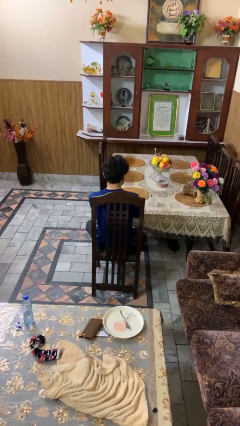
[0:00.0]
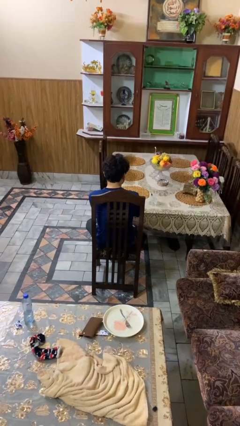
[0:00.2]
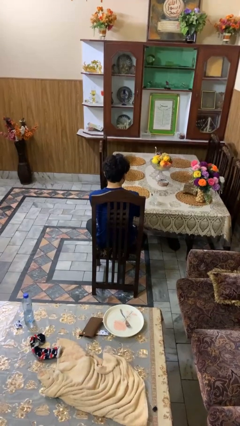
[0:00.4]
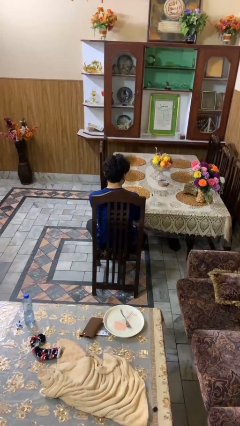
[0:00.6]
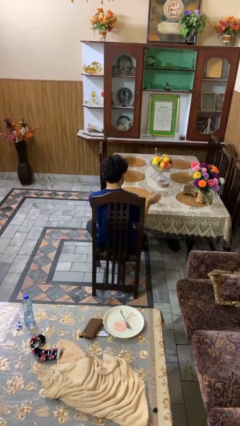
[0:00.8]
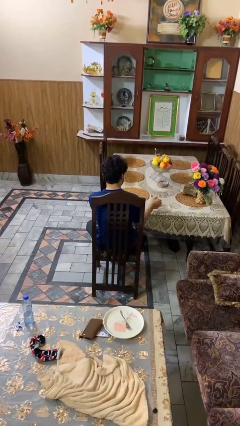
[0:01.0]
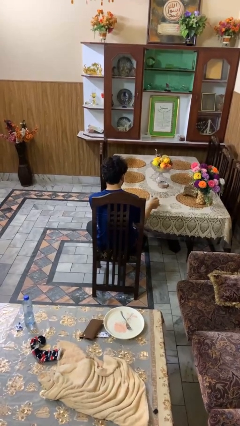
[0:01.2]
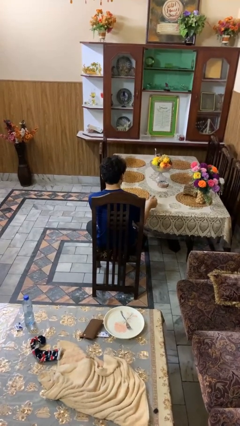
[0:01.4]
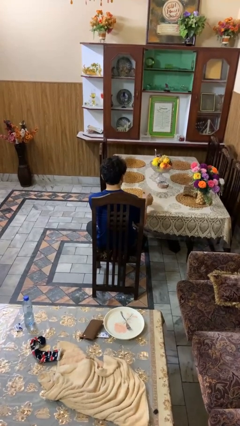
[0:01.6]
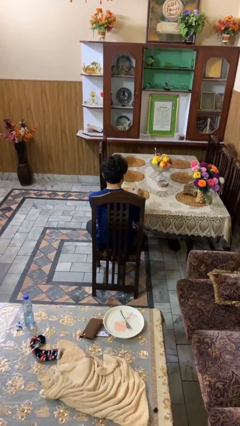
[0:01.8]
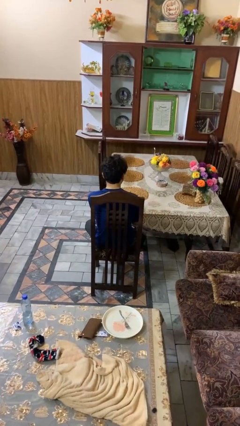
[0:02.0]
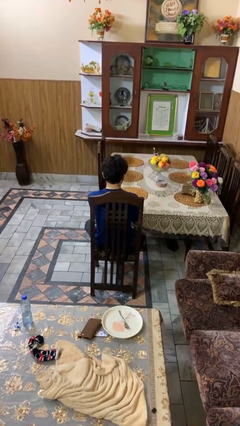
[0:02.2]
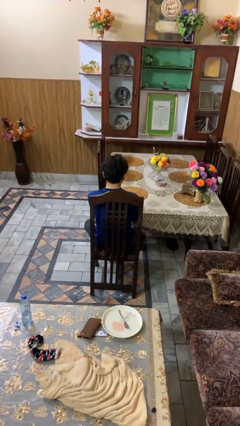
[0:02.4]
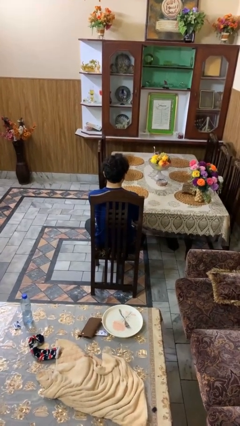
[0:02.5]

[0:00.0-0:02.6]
person picks up object from table

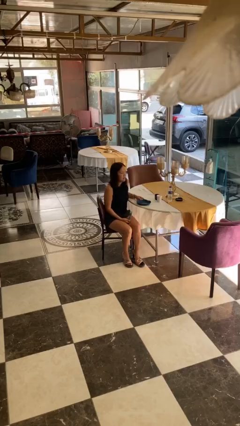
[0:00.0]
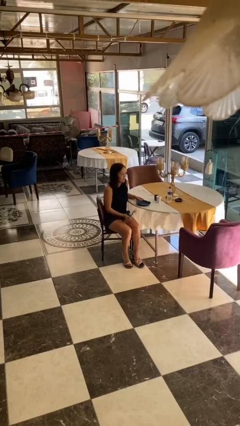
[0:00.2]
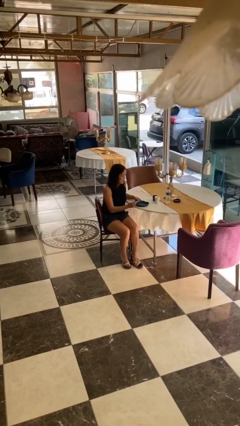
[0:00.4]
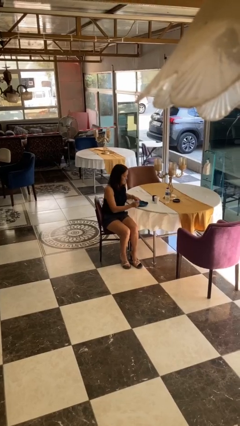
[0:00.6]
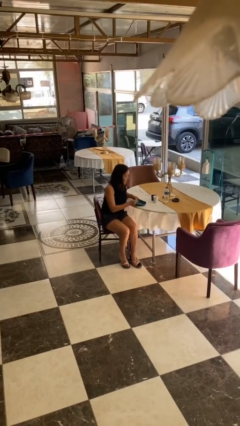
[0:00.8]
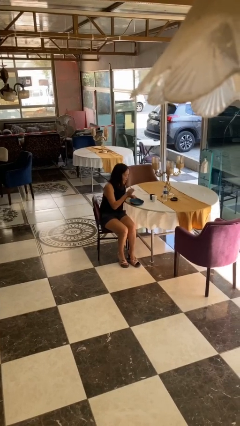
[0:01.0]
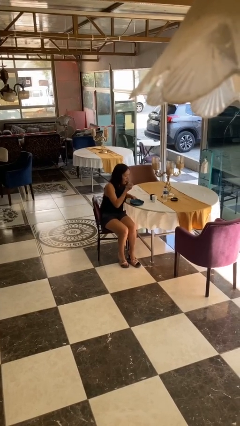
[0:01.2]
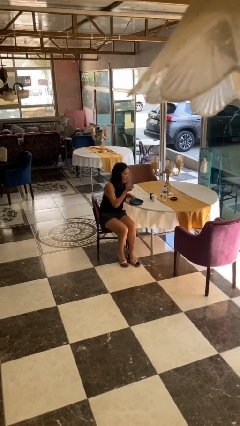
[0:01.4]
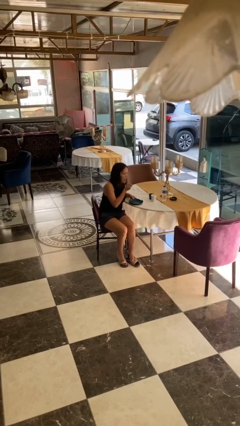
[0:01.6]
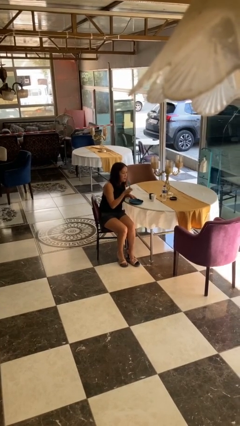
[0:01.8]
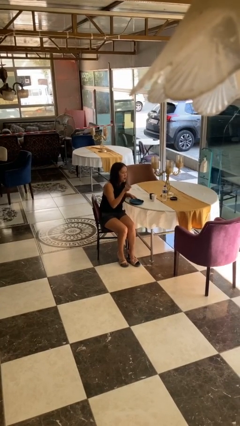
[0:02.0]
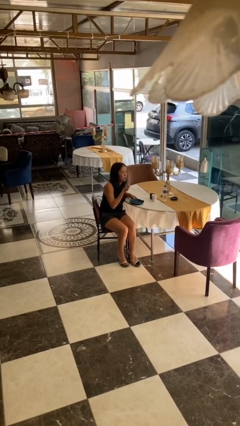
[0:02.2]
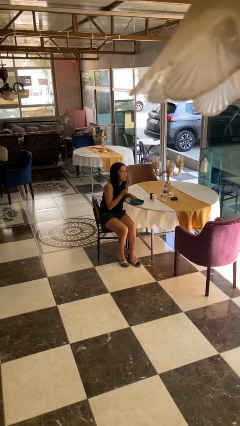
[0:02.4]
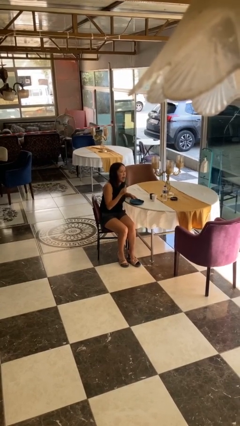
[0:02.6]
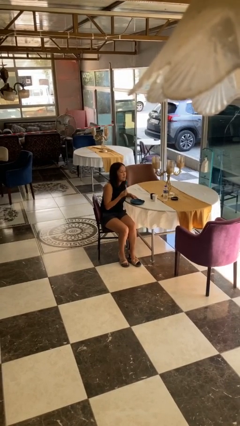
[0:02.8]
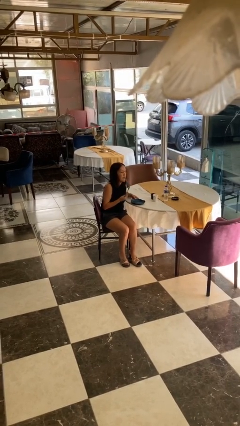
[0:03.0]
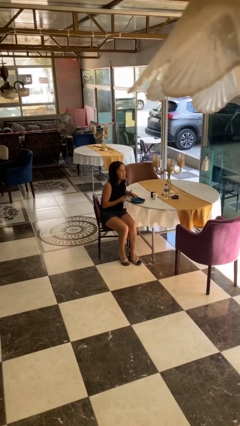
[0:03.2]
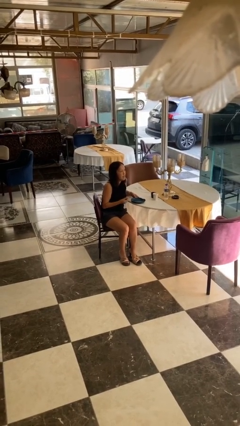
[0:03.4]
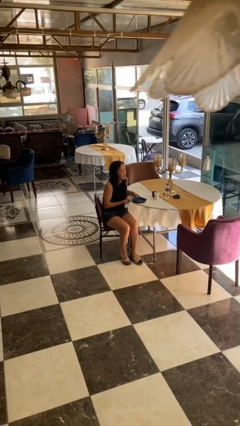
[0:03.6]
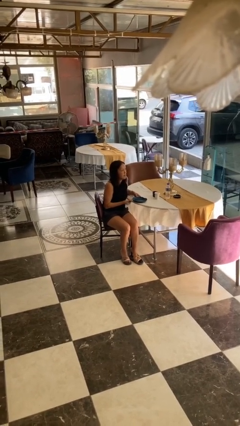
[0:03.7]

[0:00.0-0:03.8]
person eats with utensil

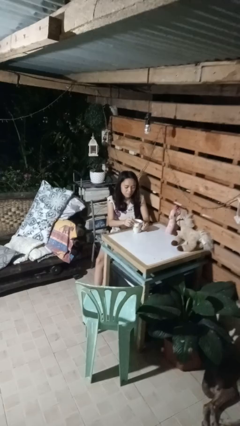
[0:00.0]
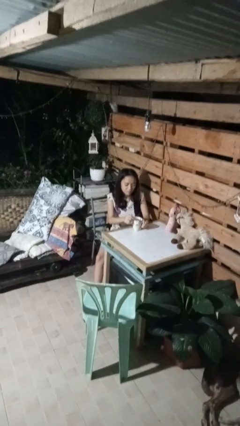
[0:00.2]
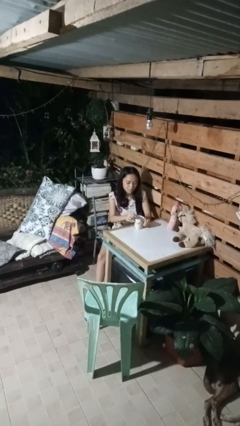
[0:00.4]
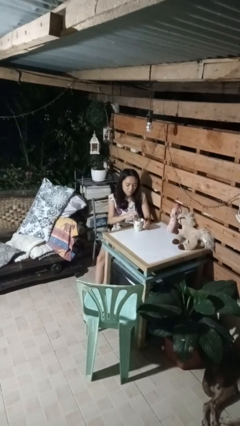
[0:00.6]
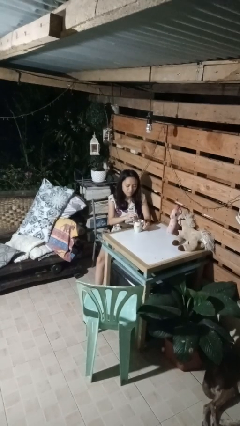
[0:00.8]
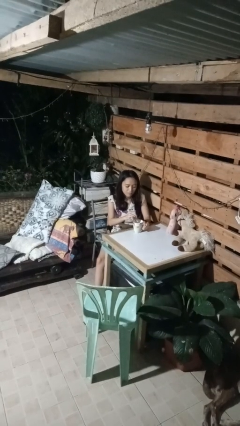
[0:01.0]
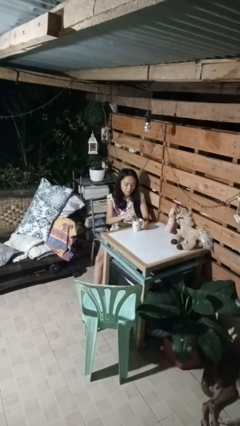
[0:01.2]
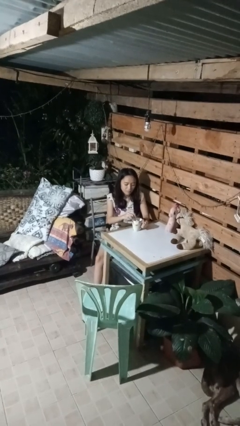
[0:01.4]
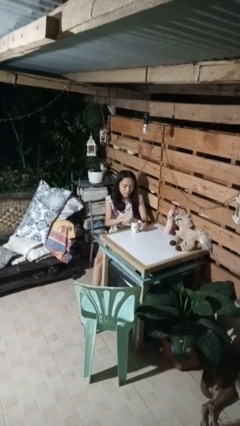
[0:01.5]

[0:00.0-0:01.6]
person stirs mug

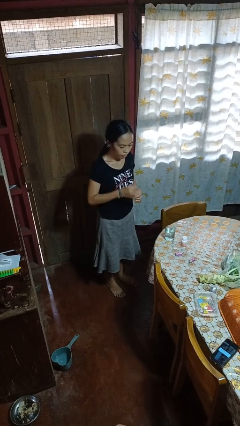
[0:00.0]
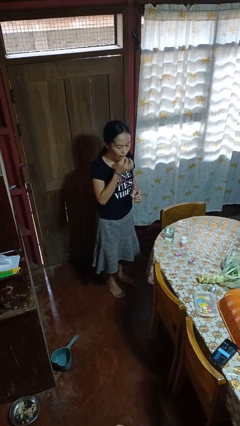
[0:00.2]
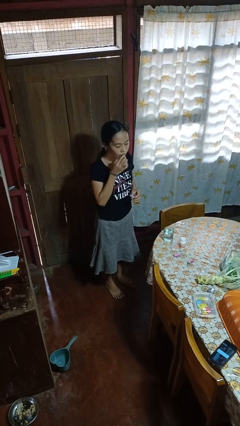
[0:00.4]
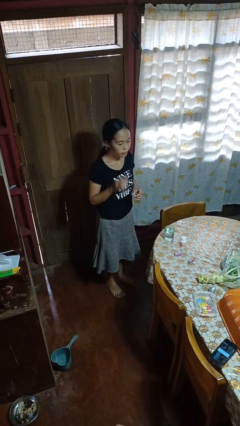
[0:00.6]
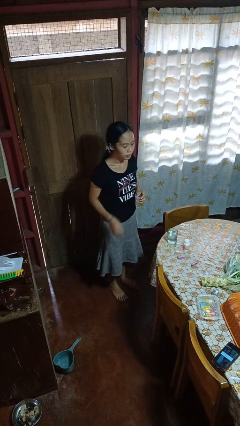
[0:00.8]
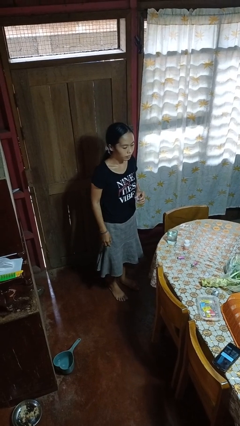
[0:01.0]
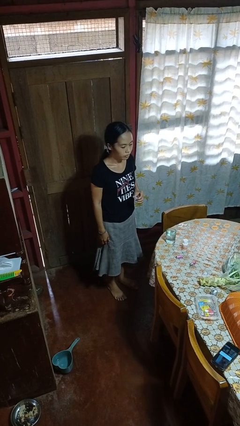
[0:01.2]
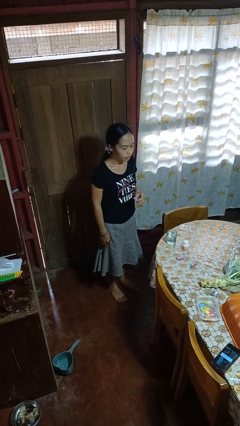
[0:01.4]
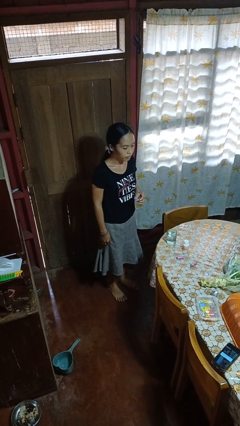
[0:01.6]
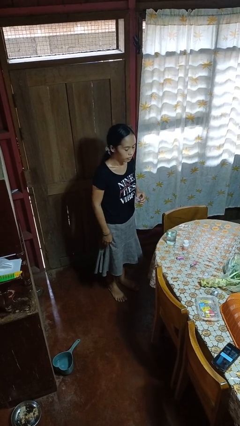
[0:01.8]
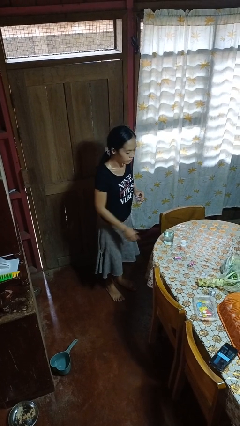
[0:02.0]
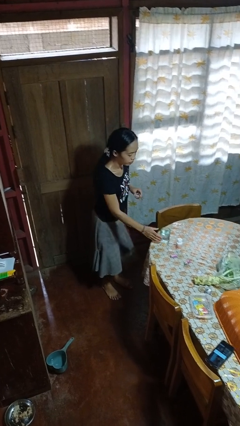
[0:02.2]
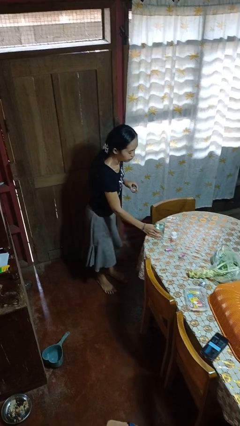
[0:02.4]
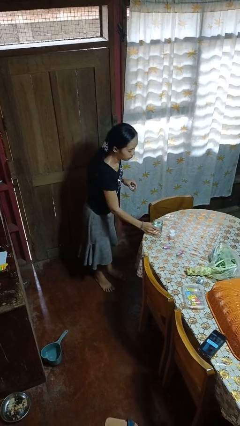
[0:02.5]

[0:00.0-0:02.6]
person takes medicine pills

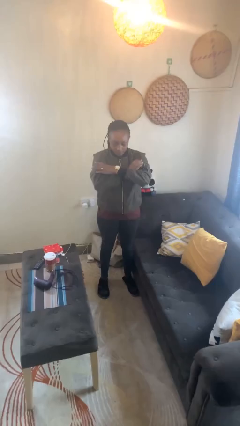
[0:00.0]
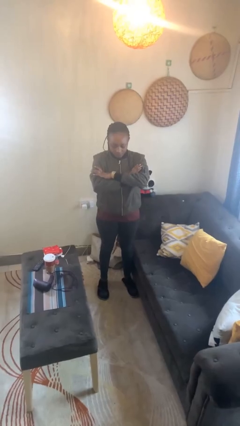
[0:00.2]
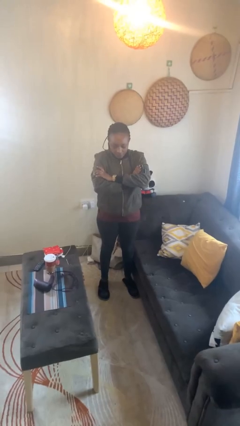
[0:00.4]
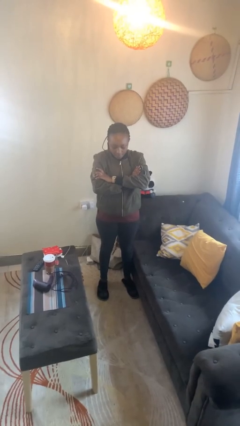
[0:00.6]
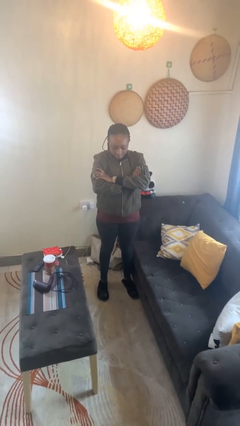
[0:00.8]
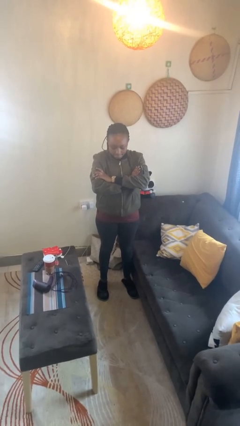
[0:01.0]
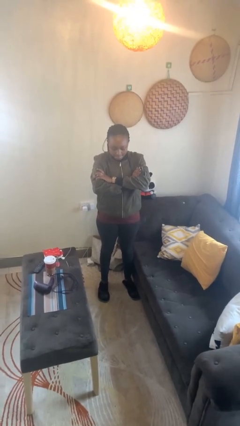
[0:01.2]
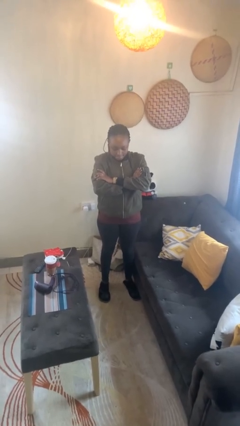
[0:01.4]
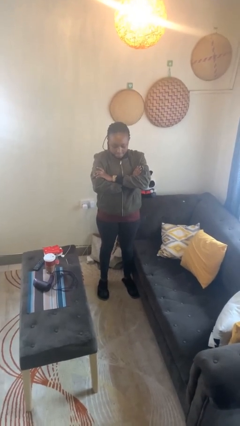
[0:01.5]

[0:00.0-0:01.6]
person gestures arms x

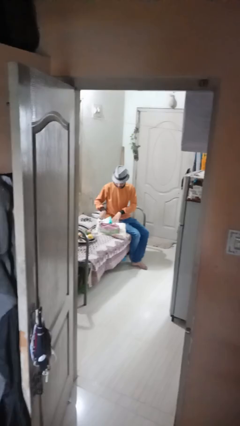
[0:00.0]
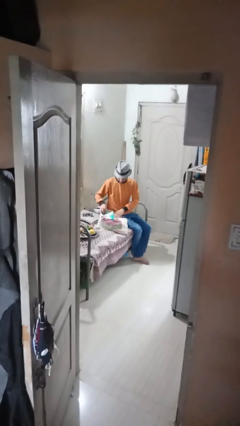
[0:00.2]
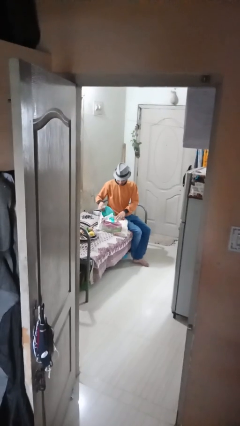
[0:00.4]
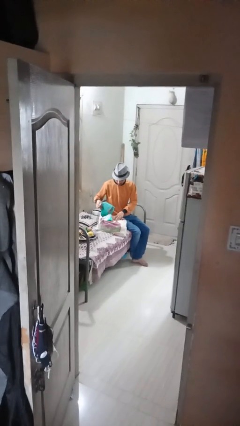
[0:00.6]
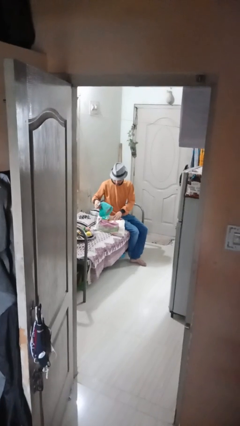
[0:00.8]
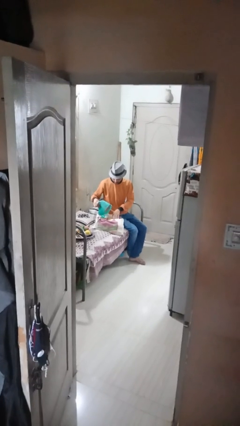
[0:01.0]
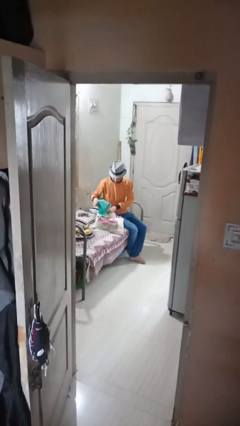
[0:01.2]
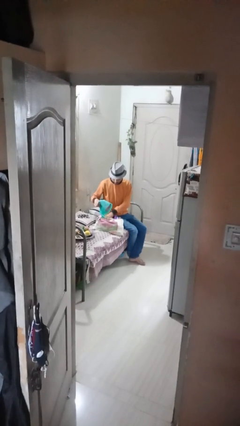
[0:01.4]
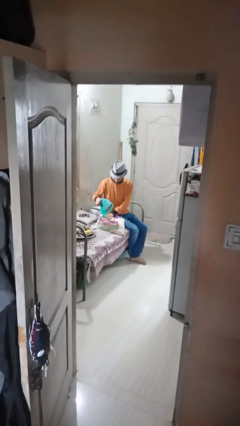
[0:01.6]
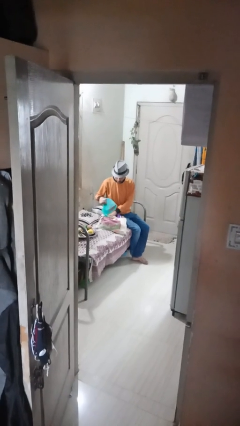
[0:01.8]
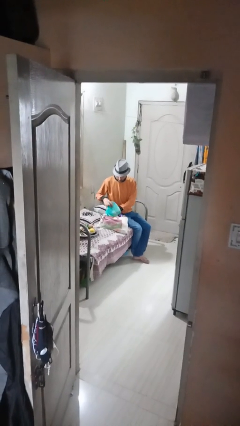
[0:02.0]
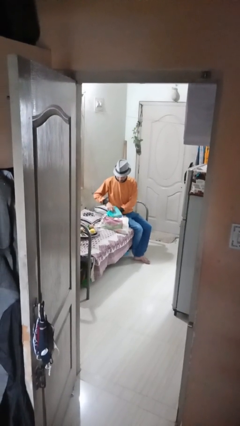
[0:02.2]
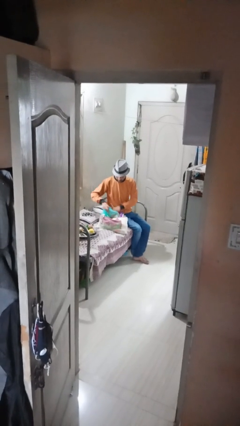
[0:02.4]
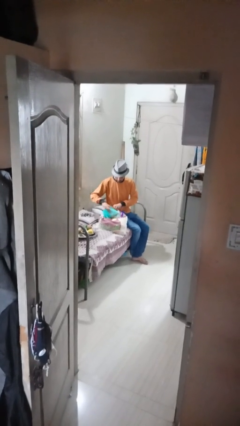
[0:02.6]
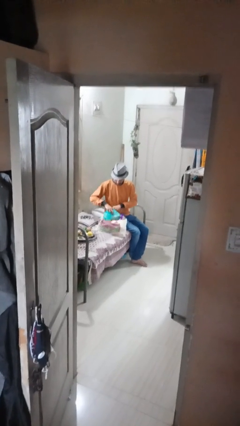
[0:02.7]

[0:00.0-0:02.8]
person searches in bag

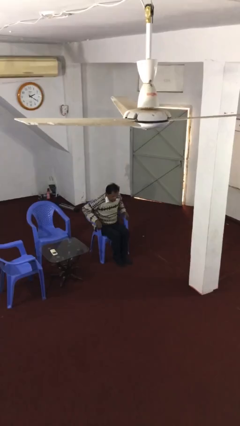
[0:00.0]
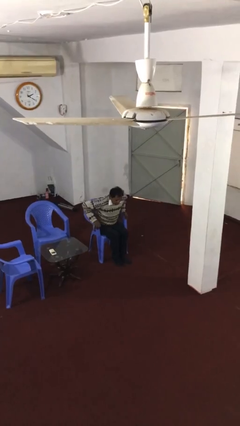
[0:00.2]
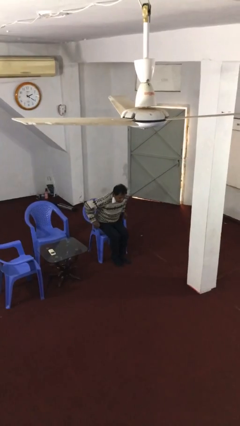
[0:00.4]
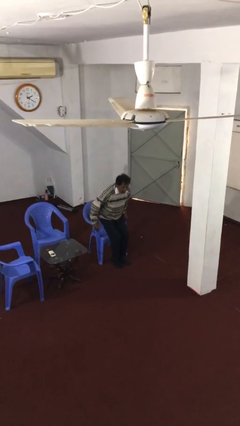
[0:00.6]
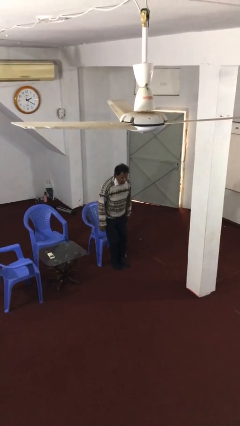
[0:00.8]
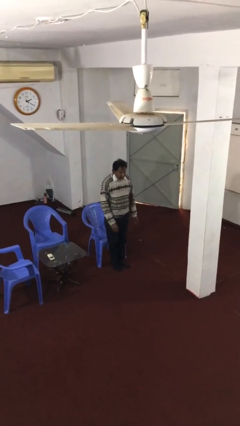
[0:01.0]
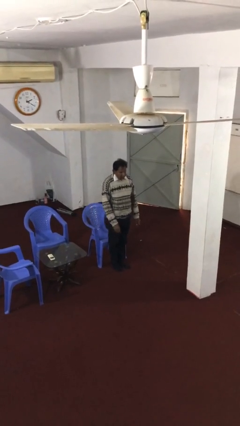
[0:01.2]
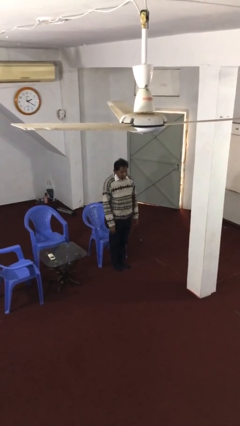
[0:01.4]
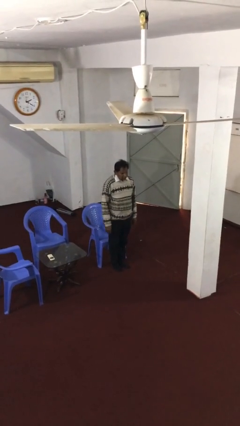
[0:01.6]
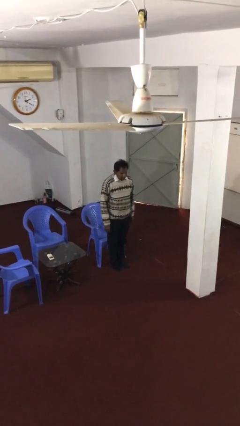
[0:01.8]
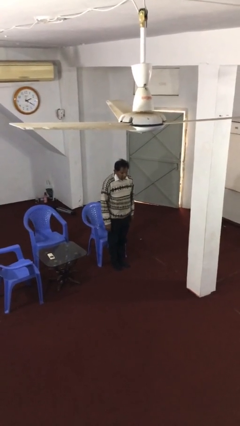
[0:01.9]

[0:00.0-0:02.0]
person stands up
